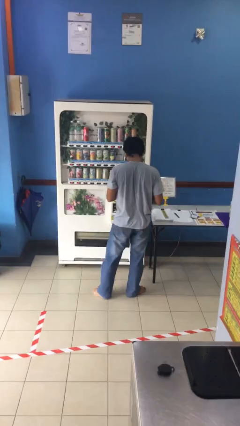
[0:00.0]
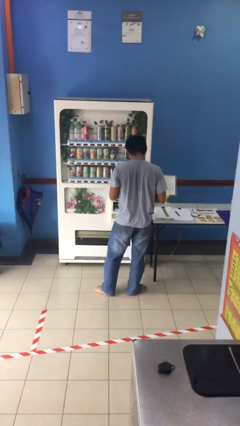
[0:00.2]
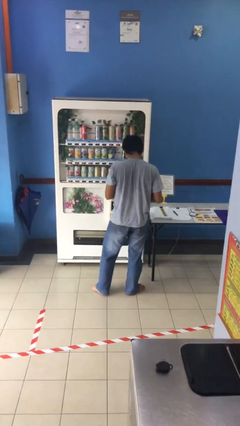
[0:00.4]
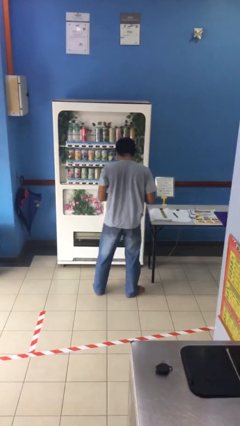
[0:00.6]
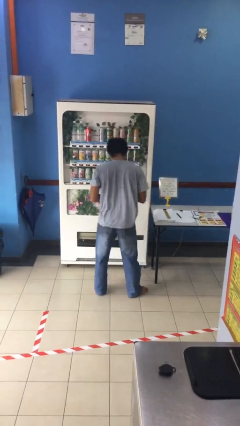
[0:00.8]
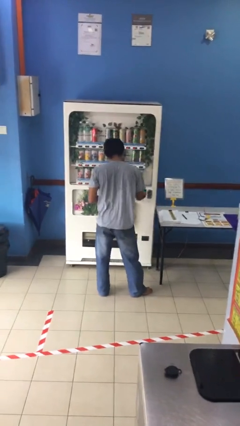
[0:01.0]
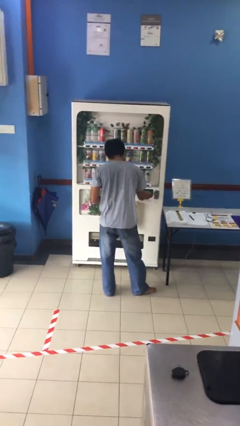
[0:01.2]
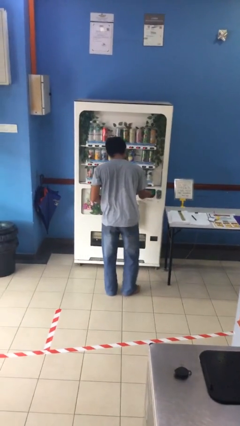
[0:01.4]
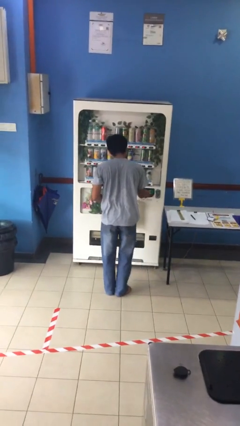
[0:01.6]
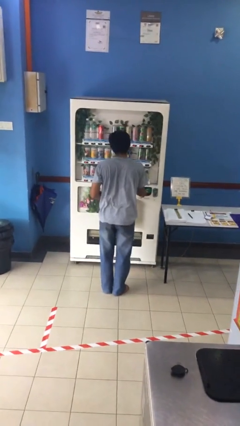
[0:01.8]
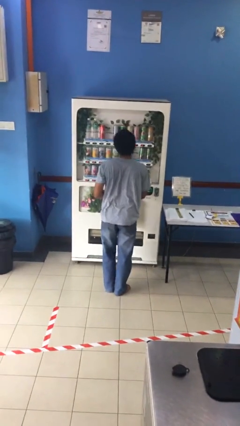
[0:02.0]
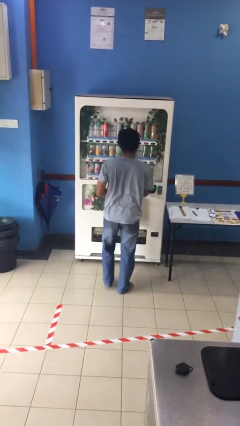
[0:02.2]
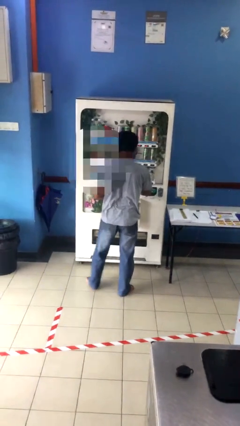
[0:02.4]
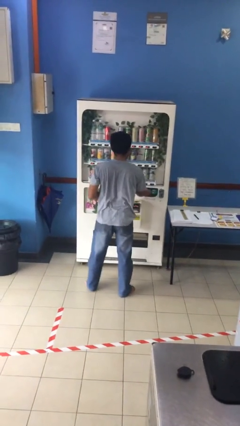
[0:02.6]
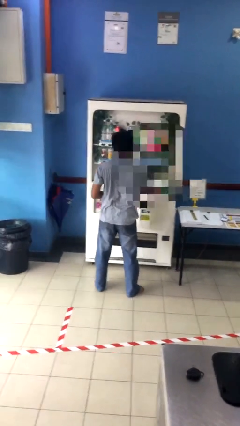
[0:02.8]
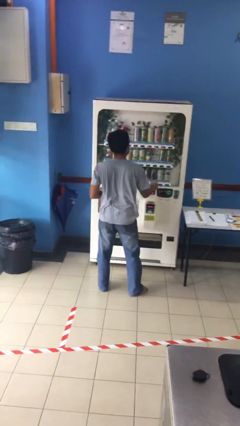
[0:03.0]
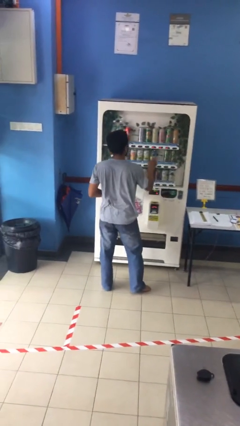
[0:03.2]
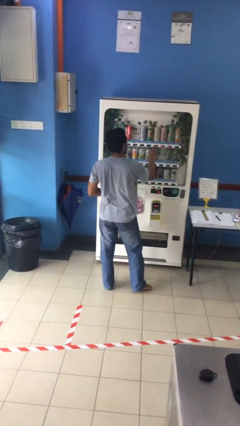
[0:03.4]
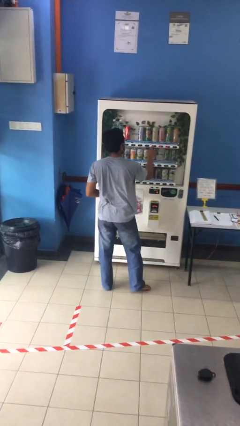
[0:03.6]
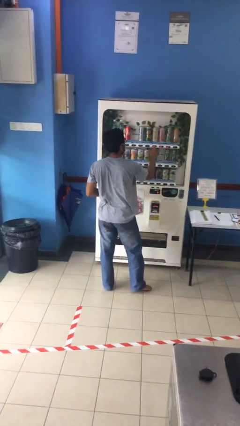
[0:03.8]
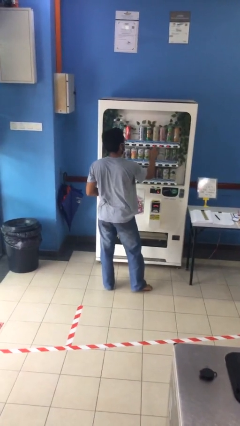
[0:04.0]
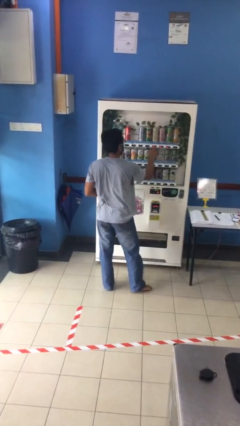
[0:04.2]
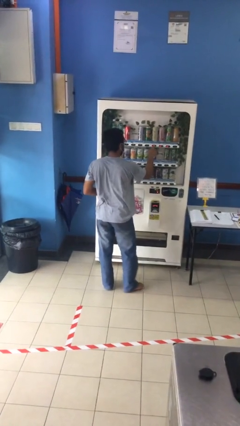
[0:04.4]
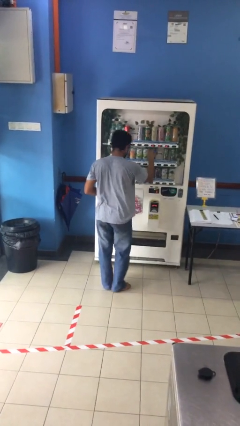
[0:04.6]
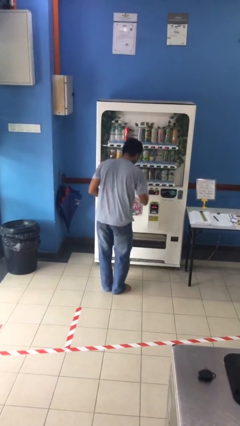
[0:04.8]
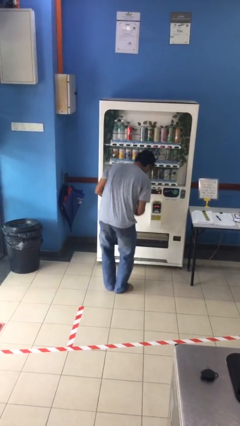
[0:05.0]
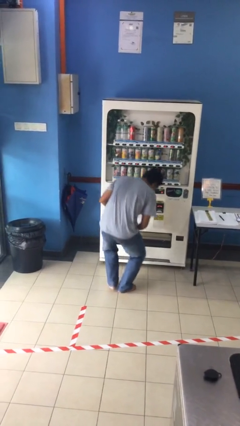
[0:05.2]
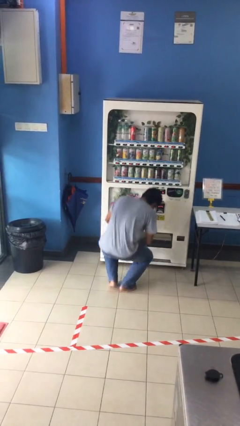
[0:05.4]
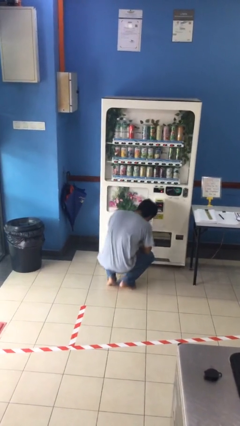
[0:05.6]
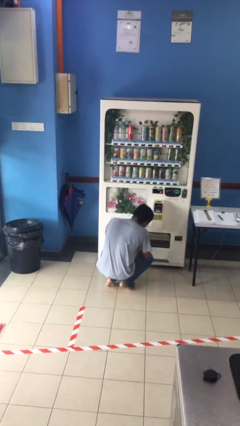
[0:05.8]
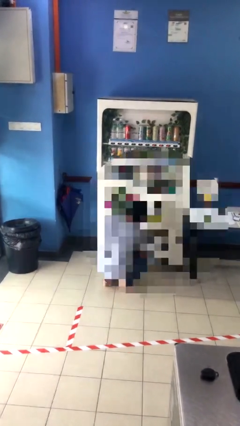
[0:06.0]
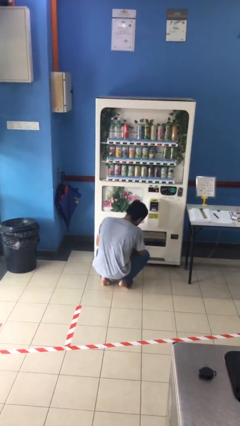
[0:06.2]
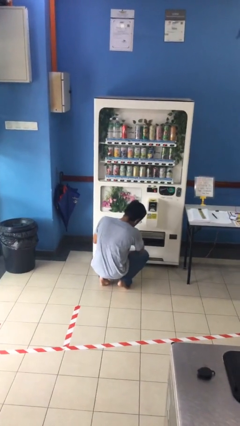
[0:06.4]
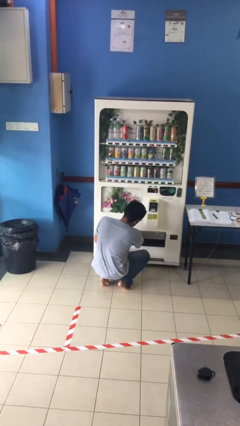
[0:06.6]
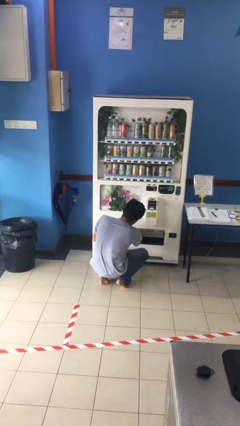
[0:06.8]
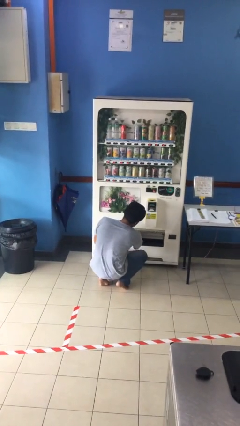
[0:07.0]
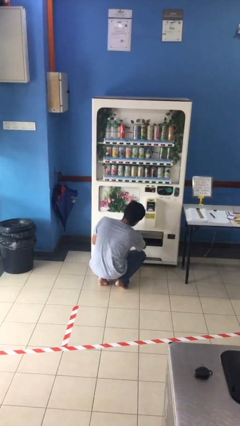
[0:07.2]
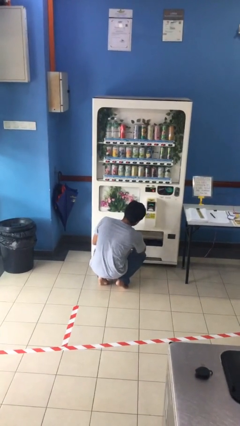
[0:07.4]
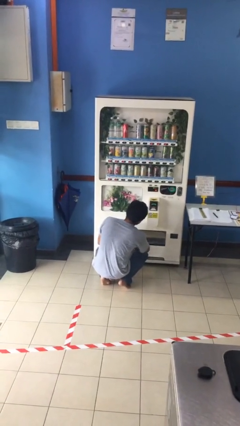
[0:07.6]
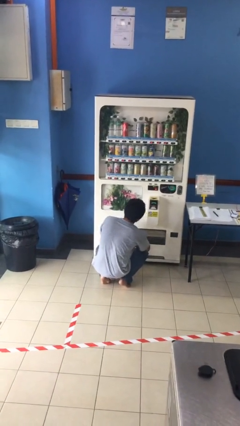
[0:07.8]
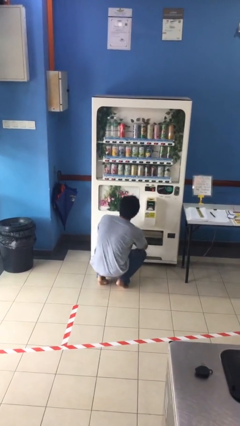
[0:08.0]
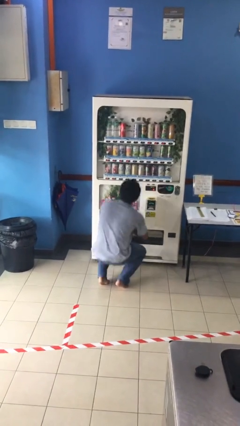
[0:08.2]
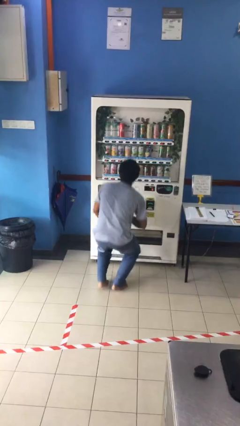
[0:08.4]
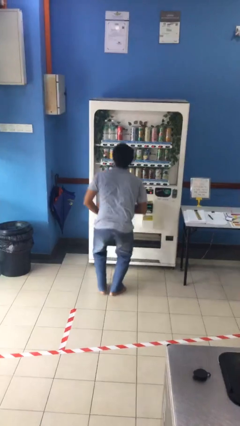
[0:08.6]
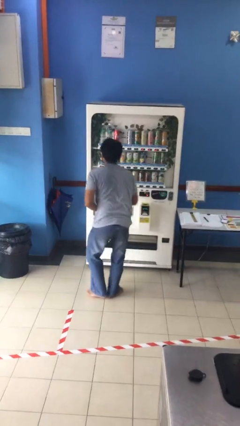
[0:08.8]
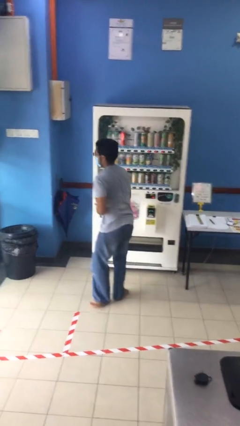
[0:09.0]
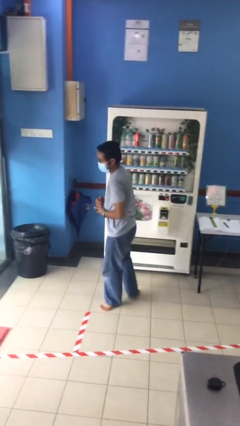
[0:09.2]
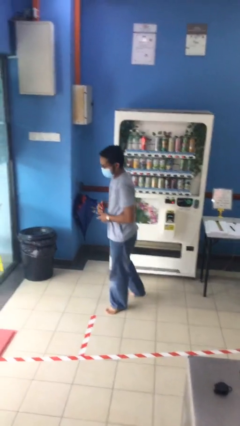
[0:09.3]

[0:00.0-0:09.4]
person purchases from machine

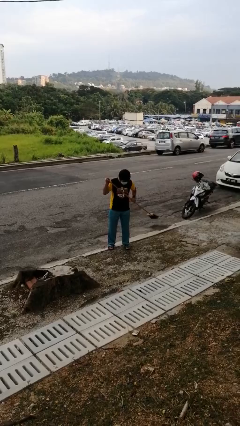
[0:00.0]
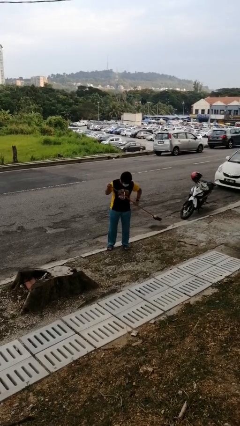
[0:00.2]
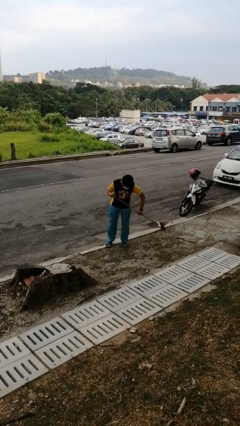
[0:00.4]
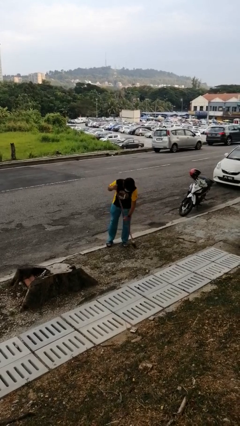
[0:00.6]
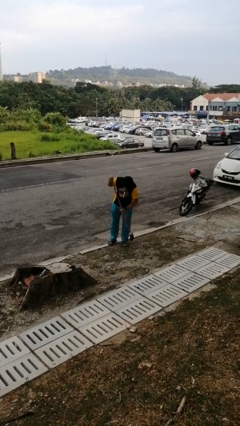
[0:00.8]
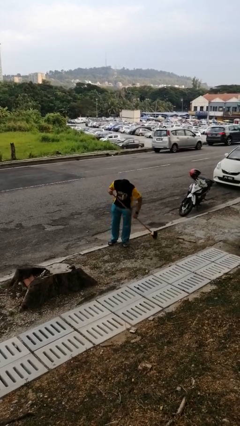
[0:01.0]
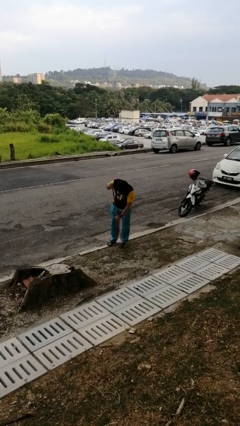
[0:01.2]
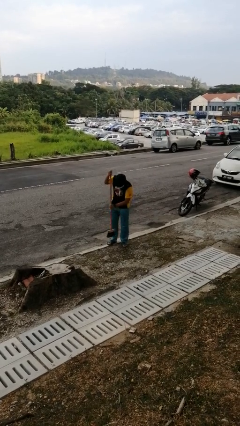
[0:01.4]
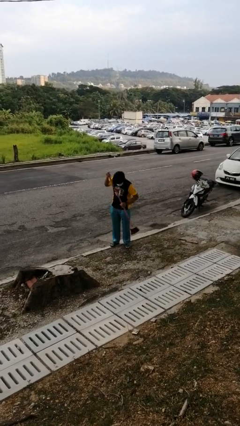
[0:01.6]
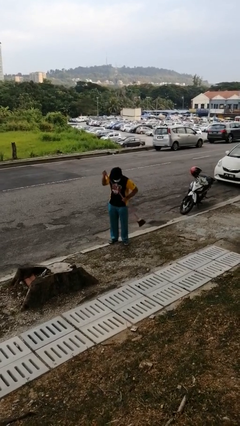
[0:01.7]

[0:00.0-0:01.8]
person sweeps floor

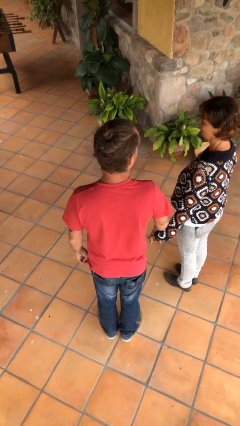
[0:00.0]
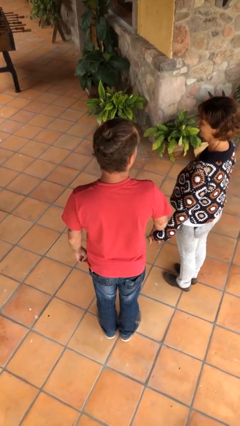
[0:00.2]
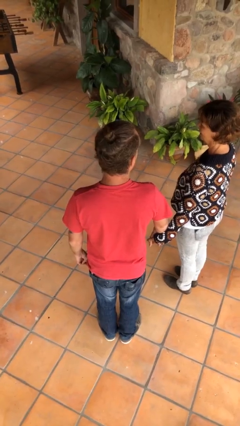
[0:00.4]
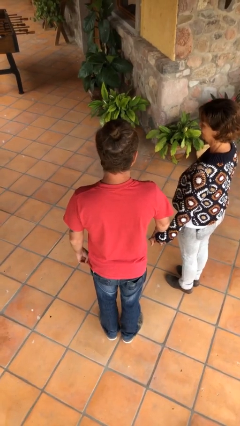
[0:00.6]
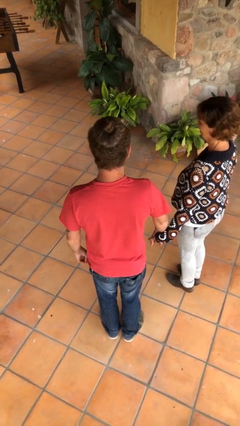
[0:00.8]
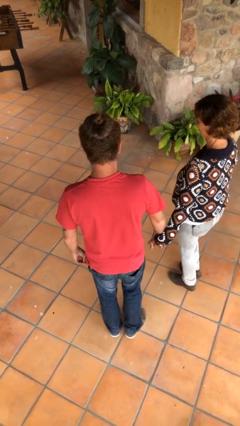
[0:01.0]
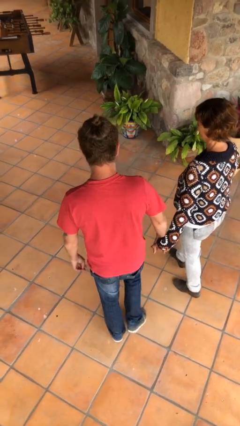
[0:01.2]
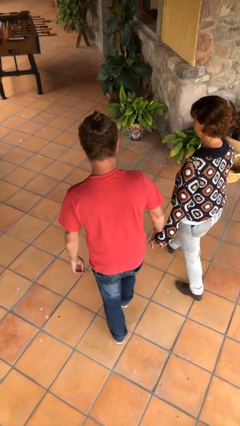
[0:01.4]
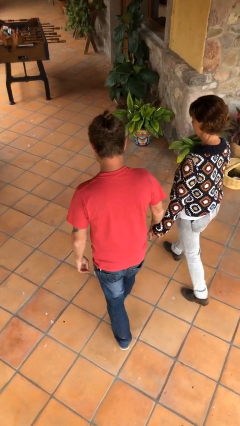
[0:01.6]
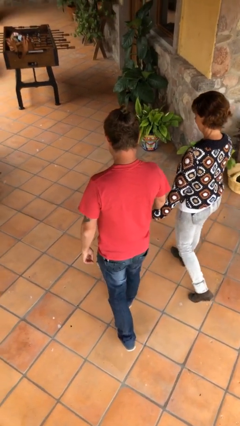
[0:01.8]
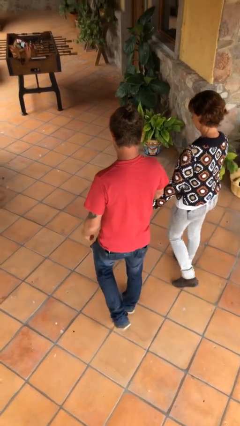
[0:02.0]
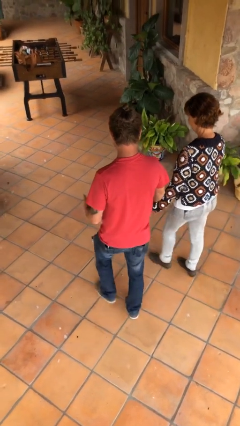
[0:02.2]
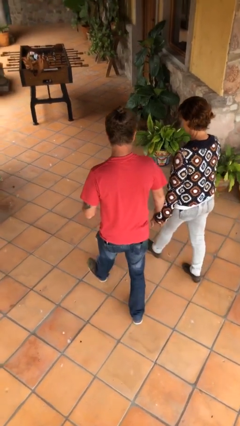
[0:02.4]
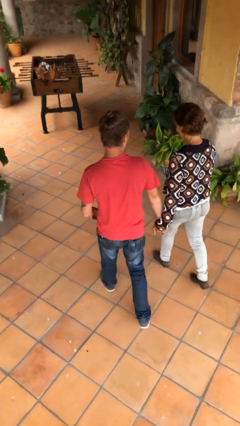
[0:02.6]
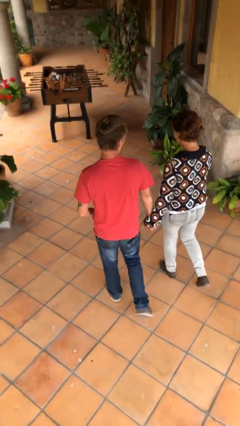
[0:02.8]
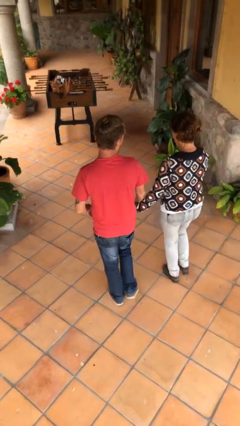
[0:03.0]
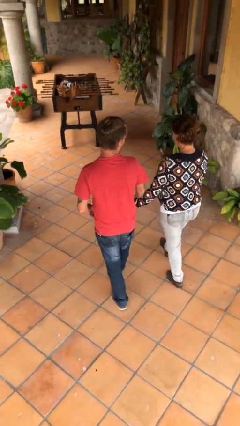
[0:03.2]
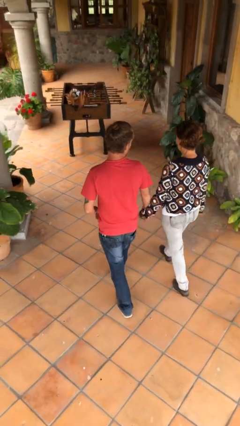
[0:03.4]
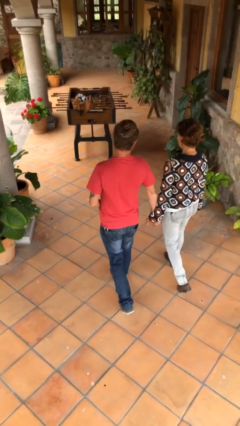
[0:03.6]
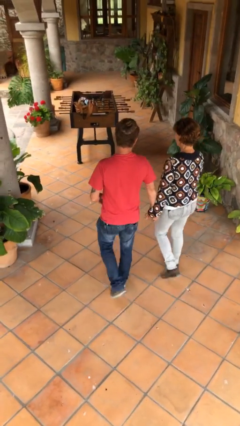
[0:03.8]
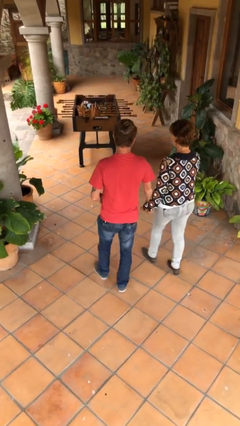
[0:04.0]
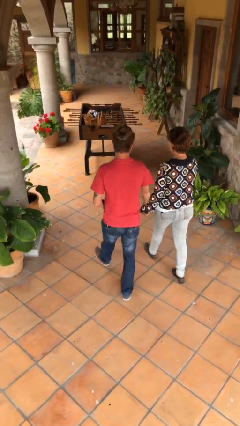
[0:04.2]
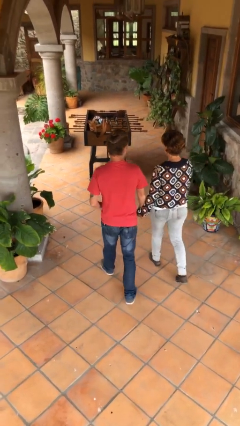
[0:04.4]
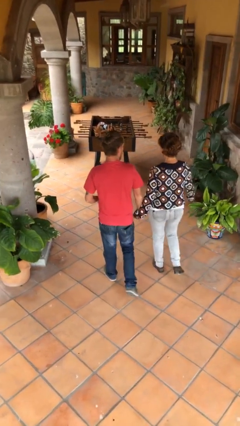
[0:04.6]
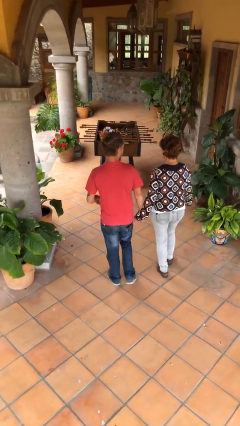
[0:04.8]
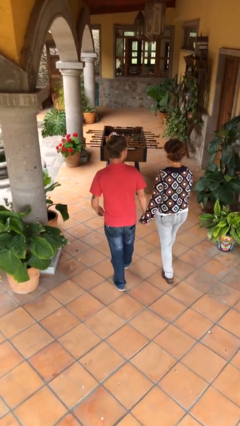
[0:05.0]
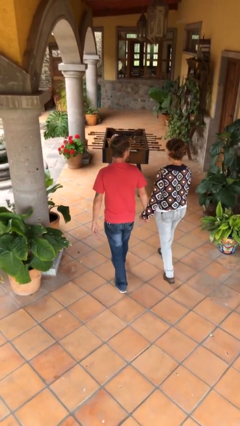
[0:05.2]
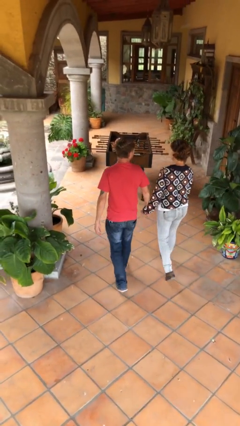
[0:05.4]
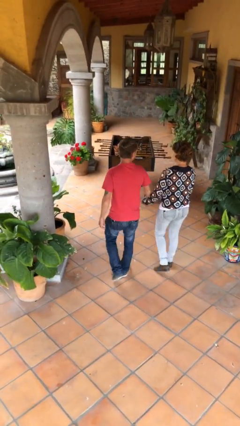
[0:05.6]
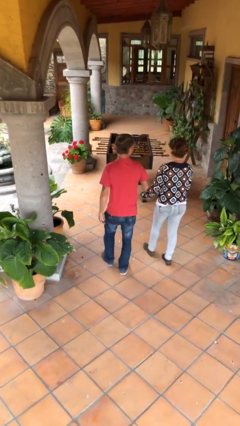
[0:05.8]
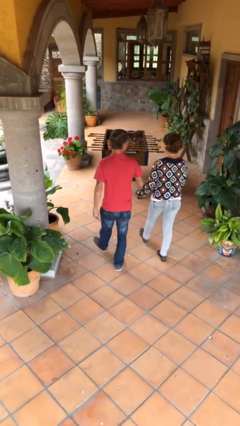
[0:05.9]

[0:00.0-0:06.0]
person holds hand

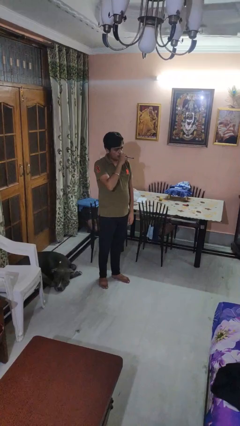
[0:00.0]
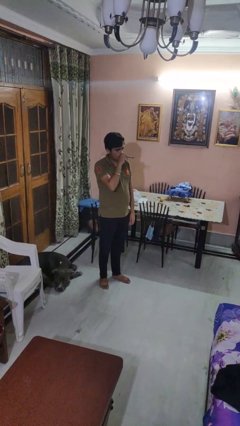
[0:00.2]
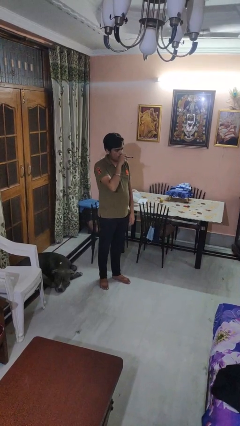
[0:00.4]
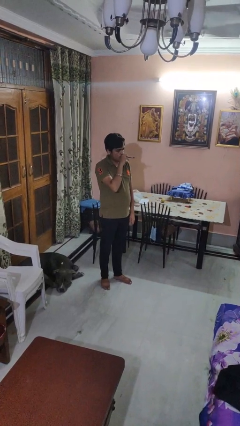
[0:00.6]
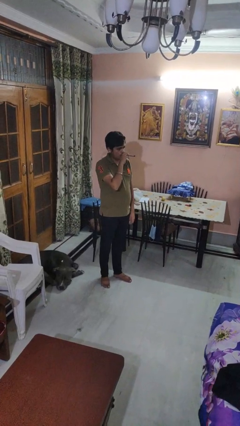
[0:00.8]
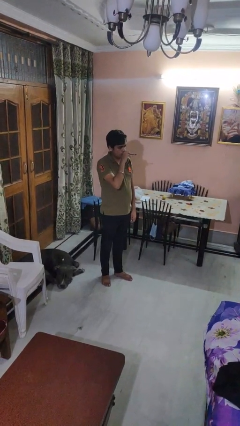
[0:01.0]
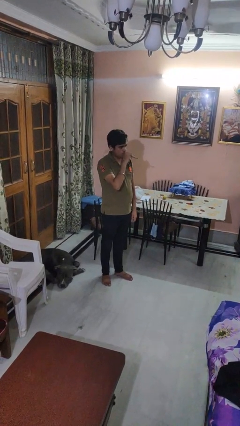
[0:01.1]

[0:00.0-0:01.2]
person vapes
